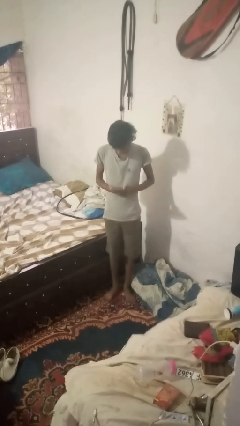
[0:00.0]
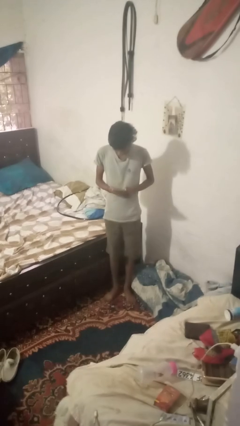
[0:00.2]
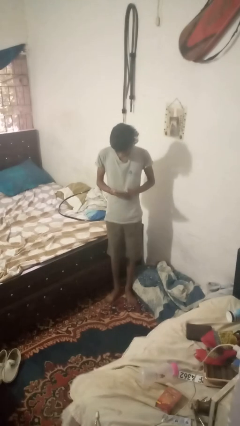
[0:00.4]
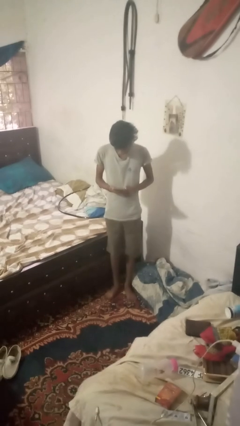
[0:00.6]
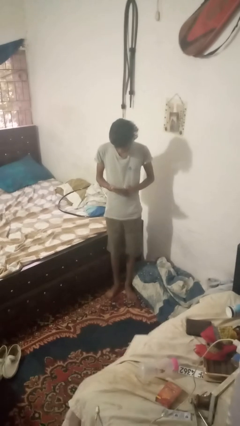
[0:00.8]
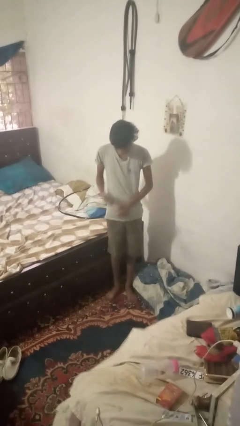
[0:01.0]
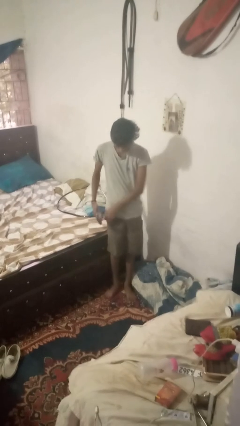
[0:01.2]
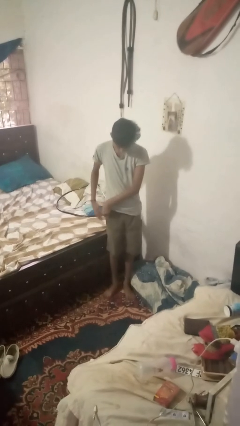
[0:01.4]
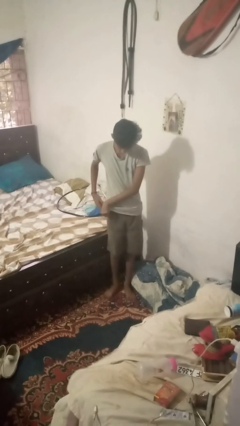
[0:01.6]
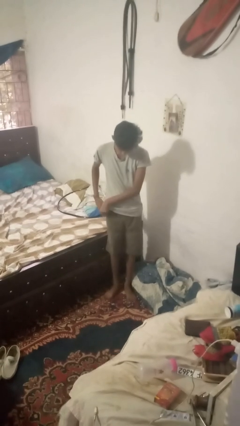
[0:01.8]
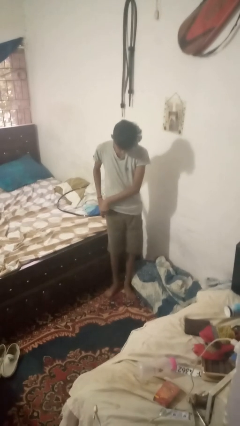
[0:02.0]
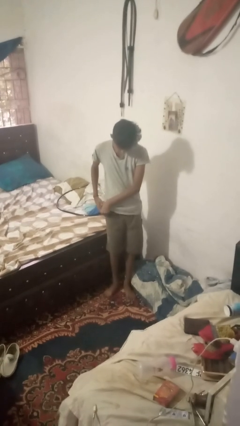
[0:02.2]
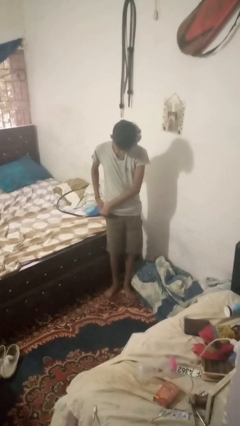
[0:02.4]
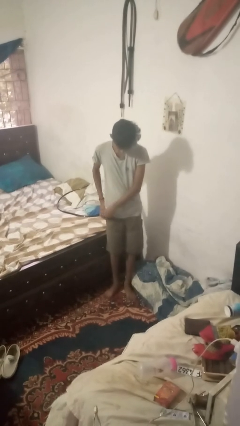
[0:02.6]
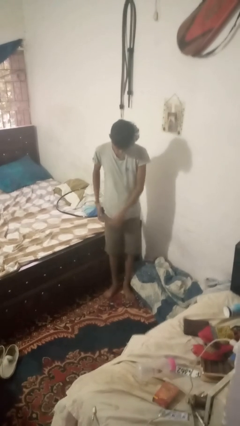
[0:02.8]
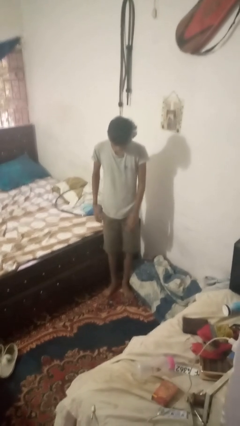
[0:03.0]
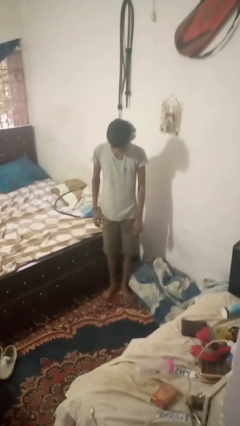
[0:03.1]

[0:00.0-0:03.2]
person puts phone into pocket

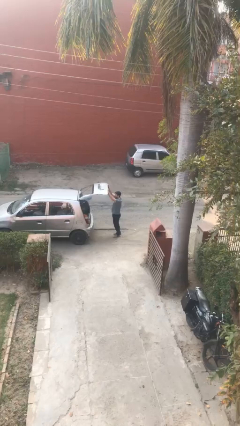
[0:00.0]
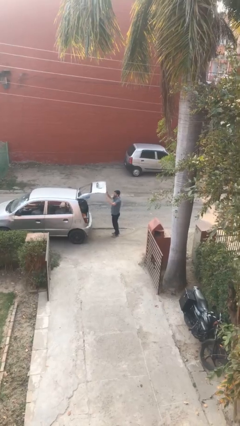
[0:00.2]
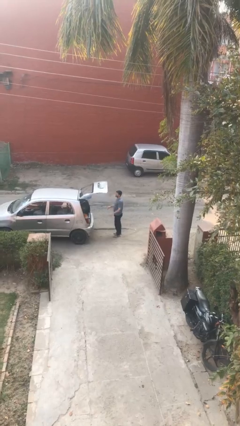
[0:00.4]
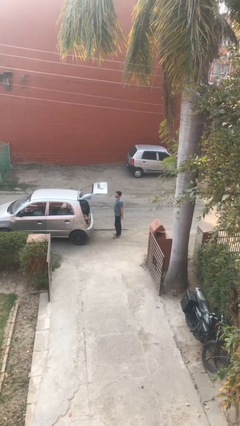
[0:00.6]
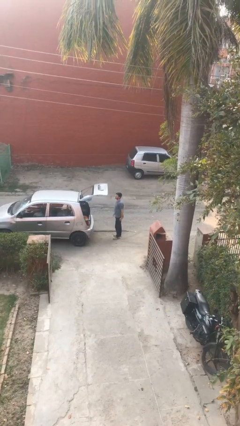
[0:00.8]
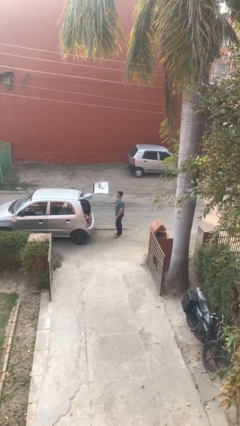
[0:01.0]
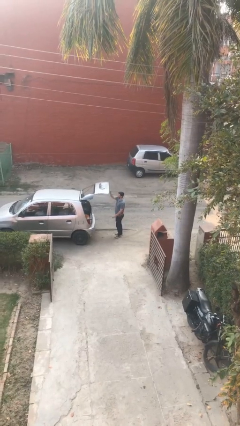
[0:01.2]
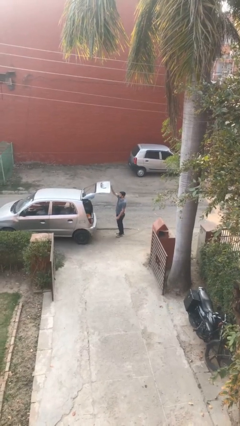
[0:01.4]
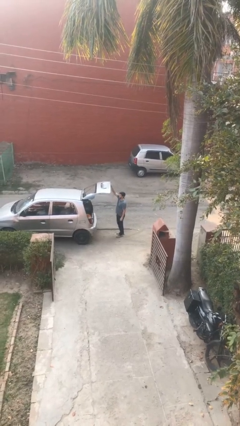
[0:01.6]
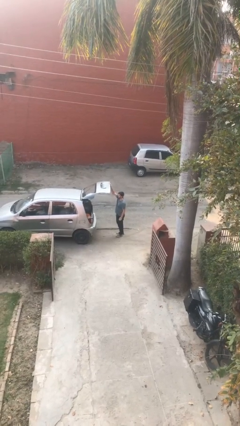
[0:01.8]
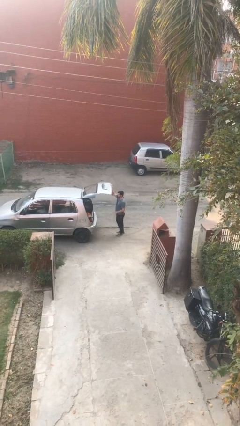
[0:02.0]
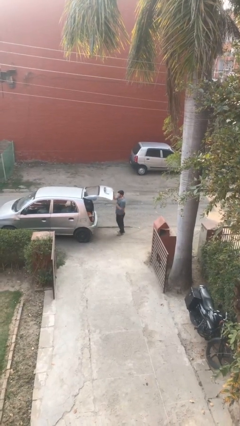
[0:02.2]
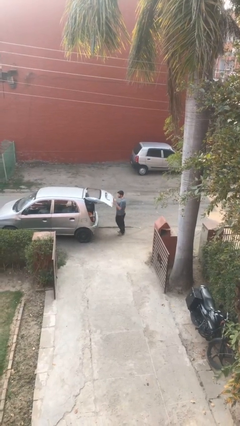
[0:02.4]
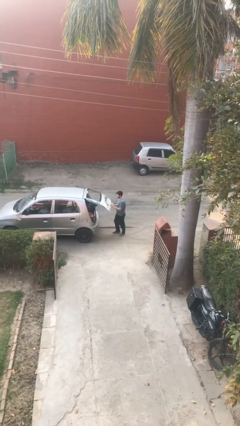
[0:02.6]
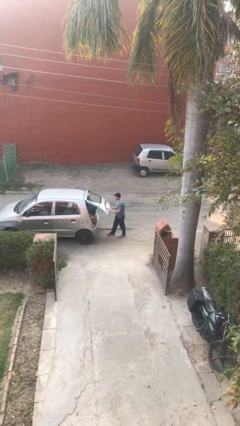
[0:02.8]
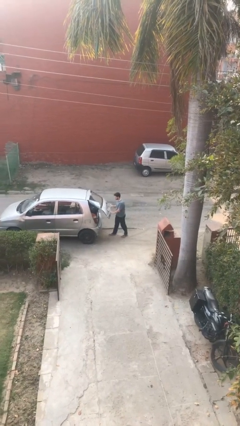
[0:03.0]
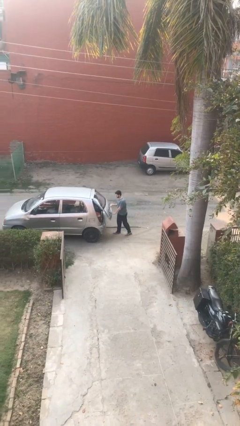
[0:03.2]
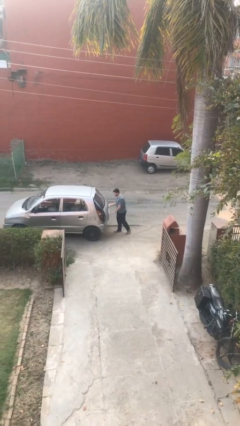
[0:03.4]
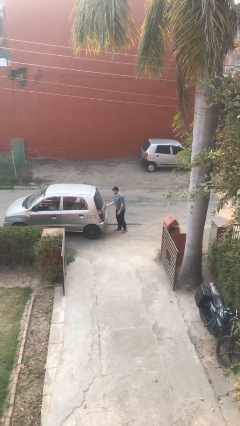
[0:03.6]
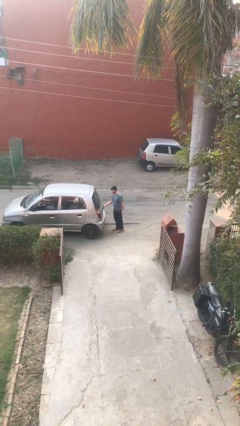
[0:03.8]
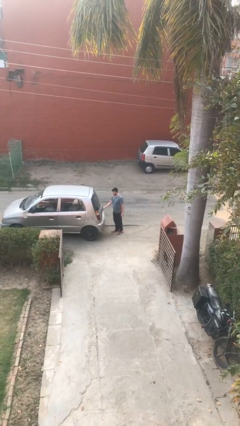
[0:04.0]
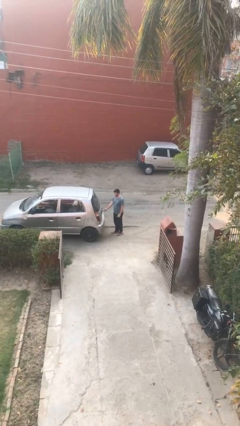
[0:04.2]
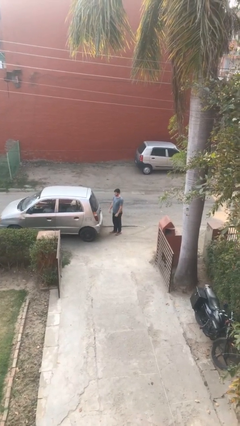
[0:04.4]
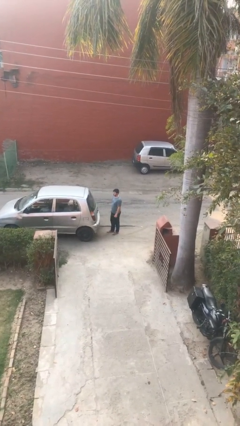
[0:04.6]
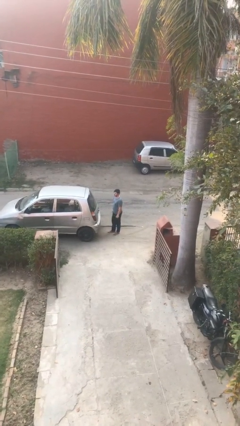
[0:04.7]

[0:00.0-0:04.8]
person closes car trunk

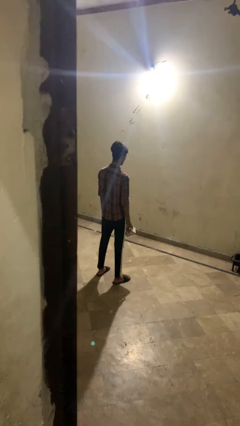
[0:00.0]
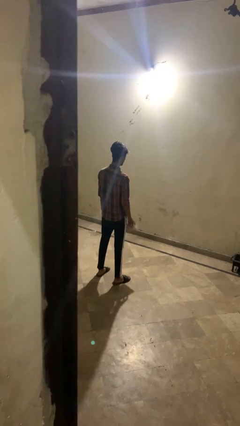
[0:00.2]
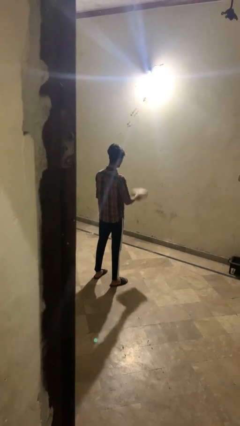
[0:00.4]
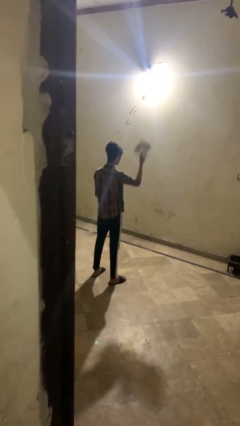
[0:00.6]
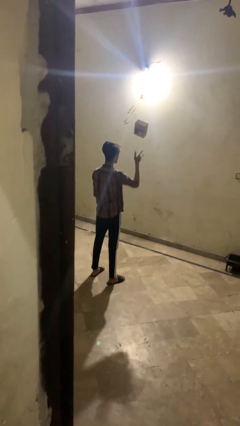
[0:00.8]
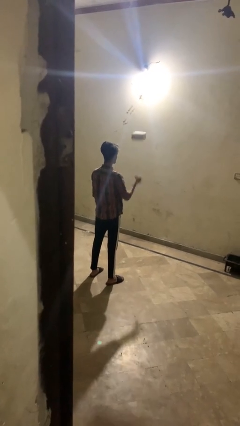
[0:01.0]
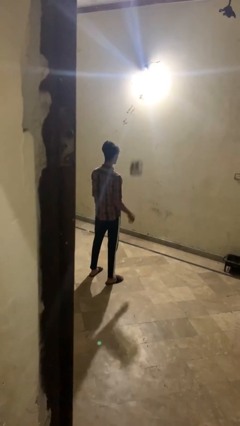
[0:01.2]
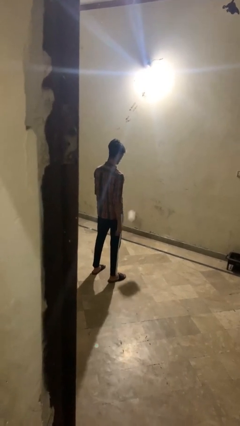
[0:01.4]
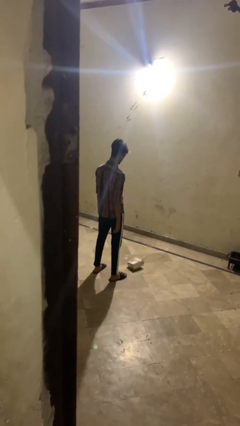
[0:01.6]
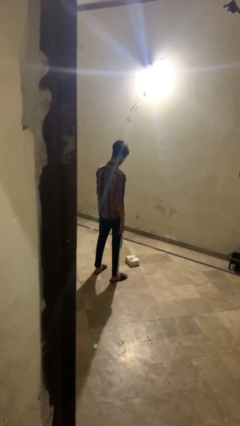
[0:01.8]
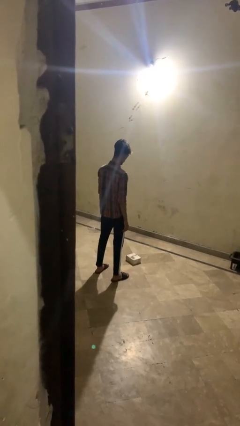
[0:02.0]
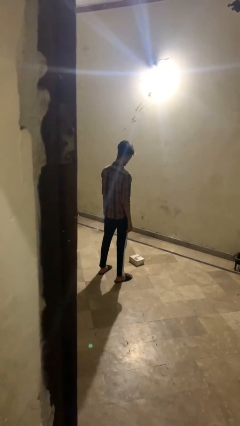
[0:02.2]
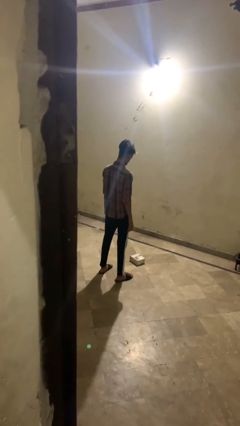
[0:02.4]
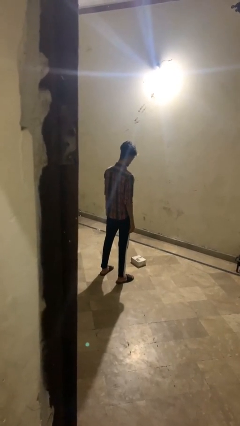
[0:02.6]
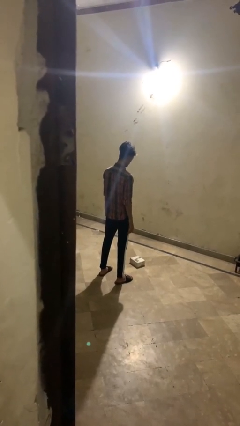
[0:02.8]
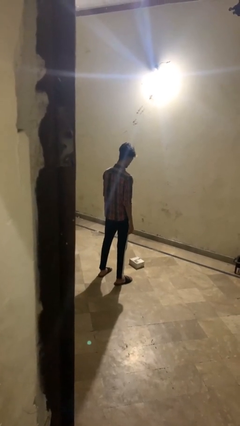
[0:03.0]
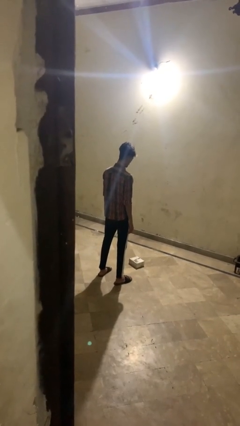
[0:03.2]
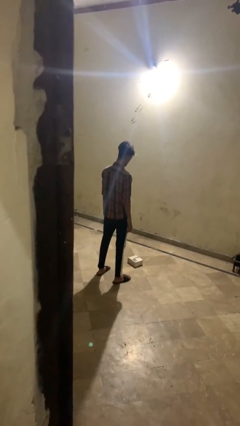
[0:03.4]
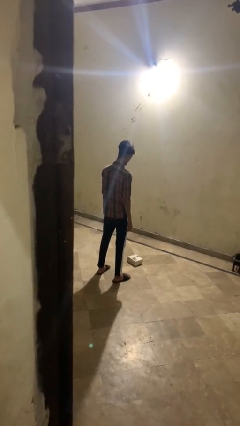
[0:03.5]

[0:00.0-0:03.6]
person throws object into air

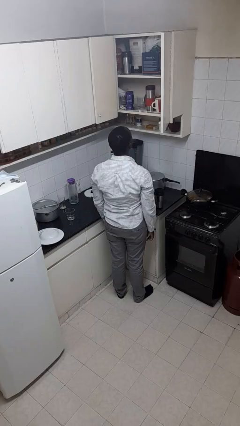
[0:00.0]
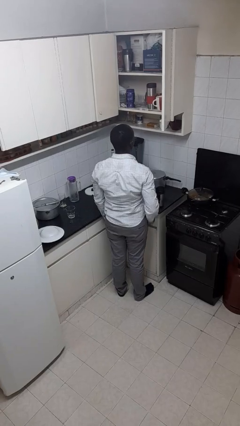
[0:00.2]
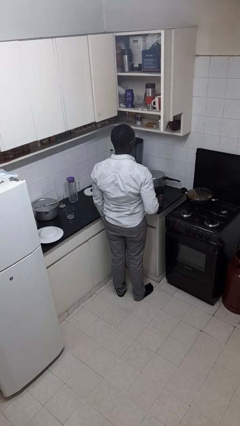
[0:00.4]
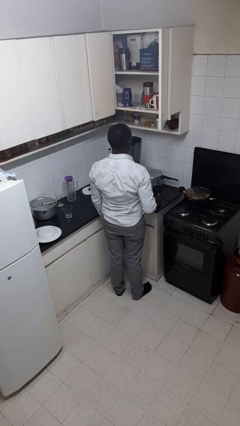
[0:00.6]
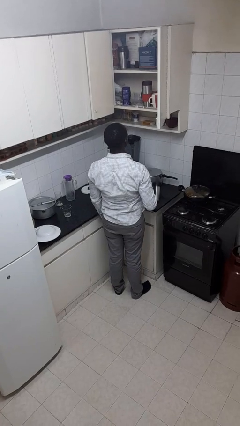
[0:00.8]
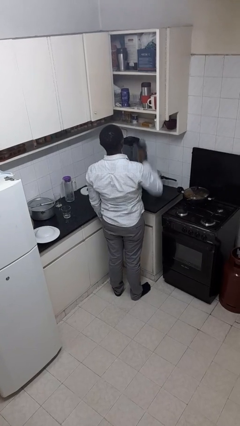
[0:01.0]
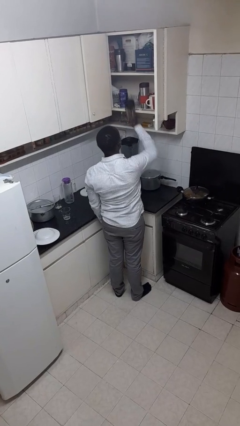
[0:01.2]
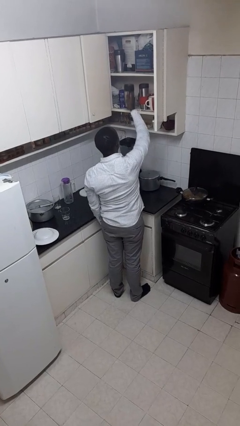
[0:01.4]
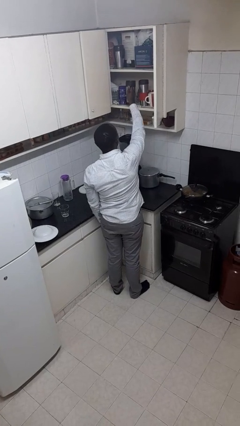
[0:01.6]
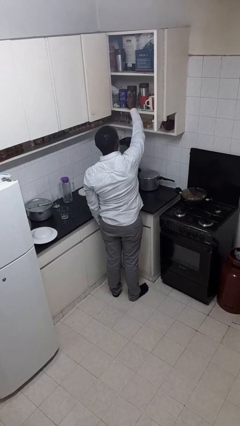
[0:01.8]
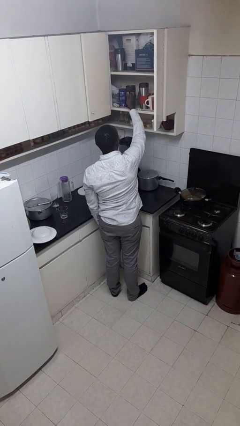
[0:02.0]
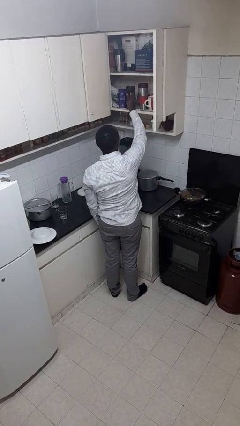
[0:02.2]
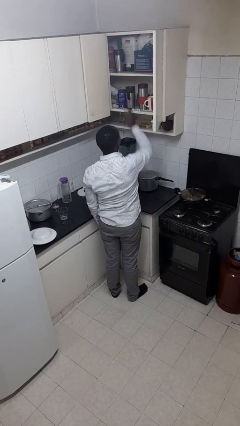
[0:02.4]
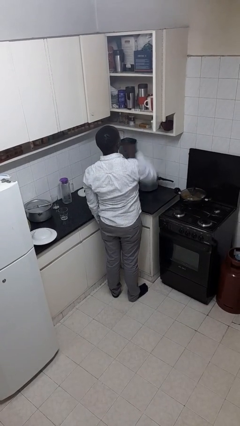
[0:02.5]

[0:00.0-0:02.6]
person puts object in cabinet

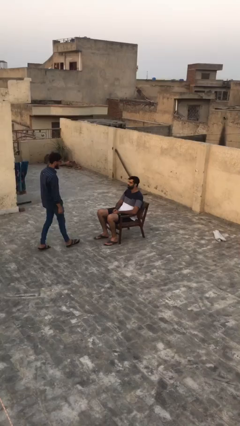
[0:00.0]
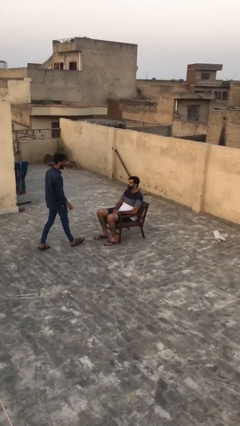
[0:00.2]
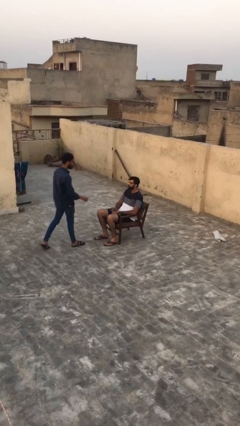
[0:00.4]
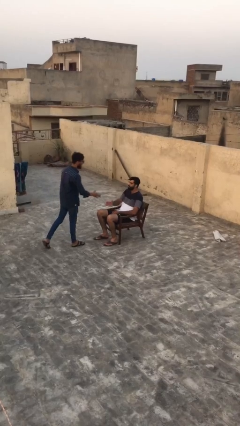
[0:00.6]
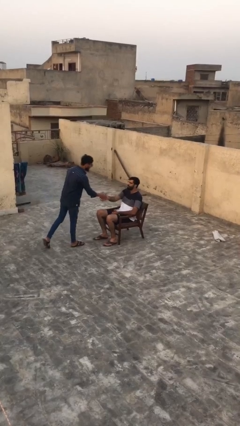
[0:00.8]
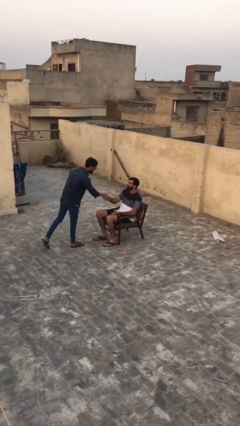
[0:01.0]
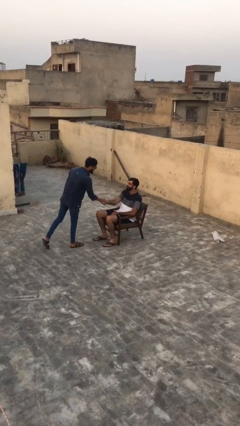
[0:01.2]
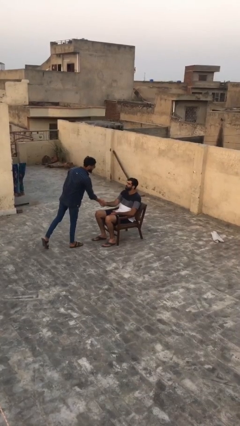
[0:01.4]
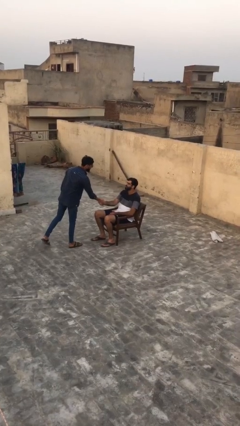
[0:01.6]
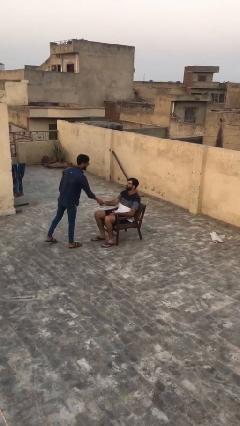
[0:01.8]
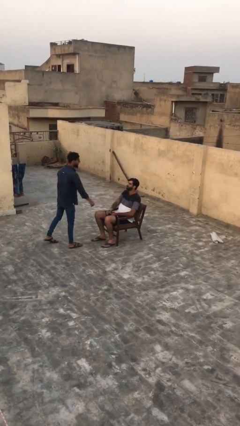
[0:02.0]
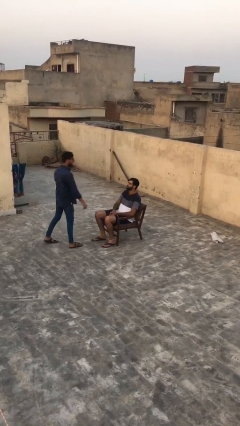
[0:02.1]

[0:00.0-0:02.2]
person shakes hand

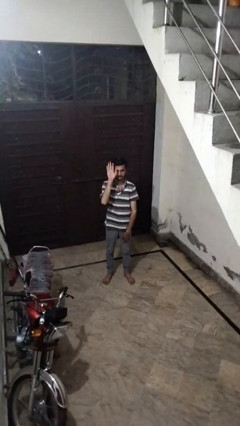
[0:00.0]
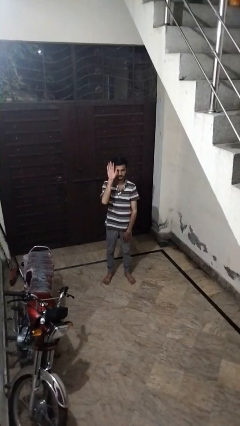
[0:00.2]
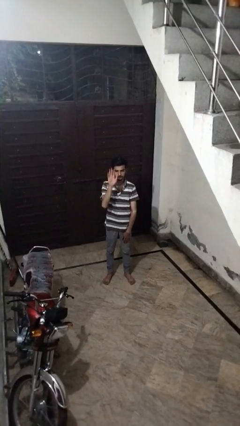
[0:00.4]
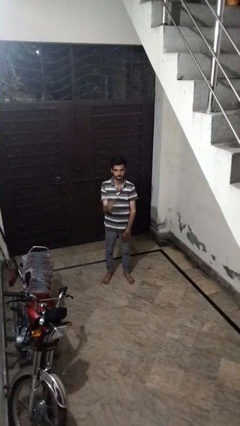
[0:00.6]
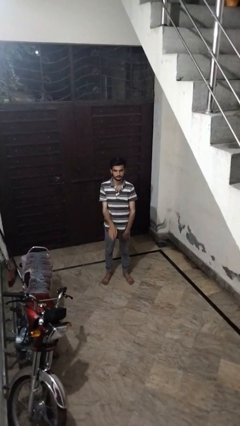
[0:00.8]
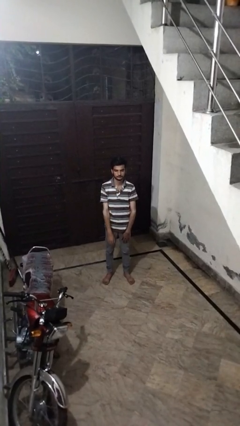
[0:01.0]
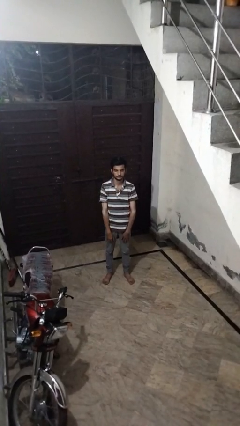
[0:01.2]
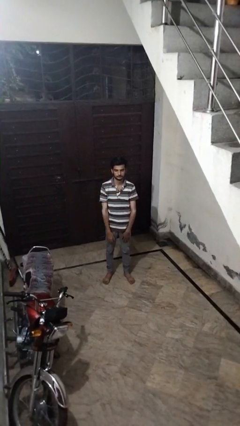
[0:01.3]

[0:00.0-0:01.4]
person gestures lower hand
